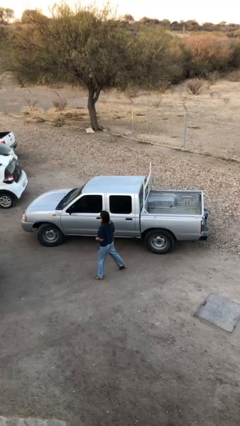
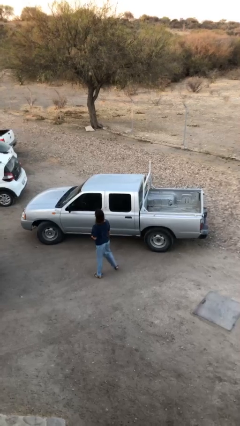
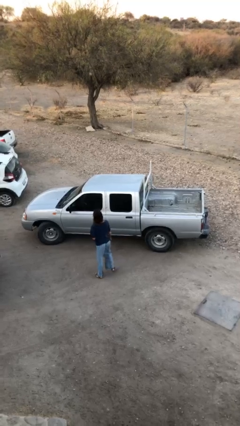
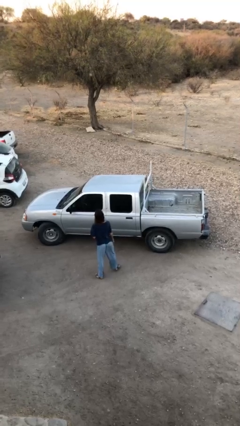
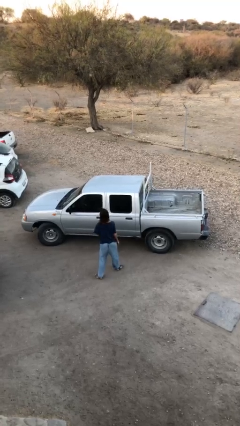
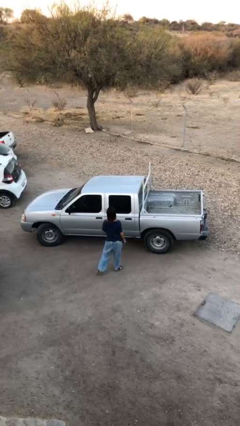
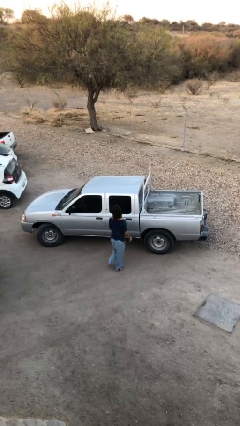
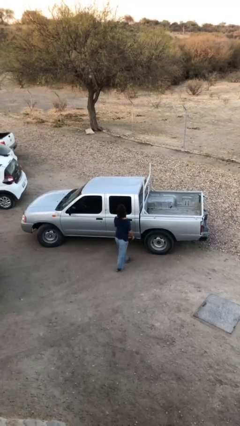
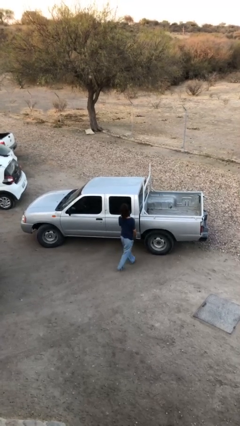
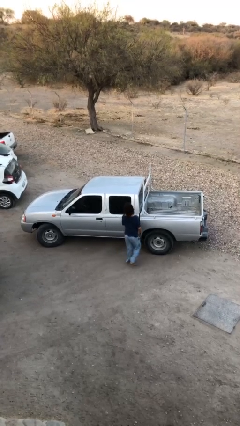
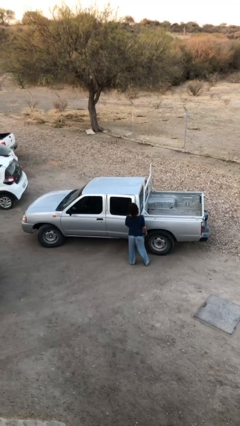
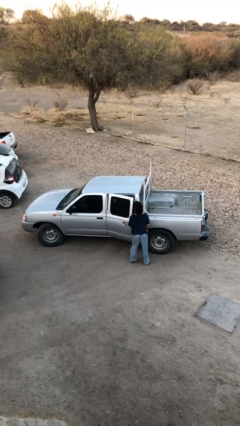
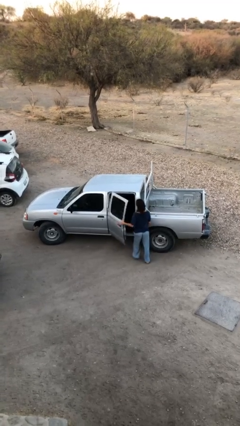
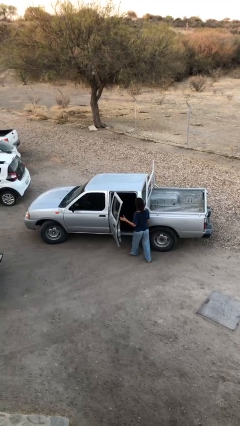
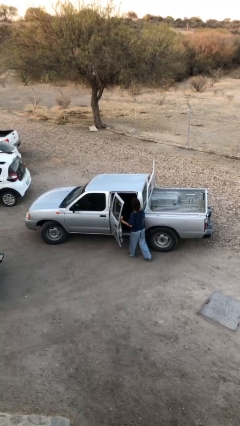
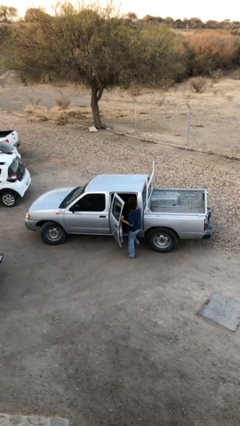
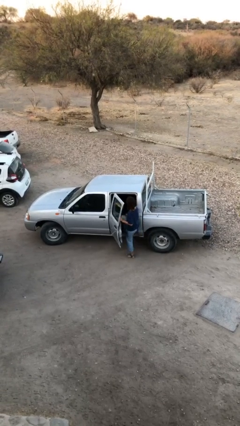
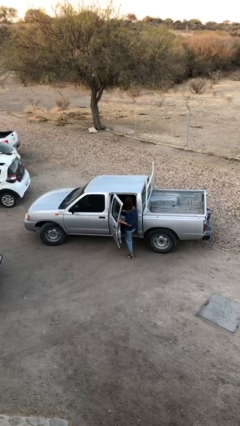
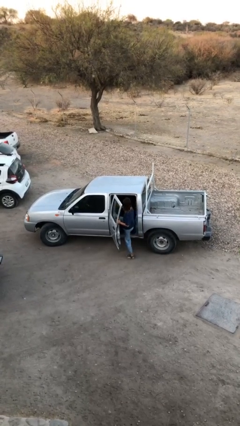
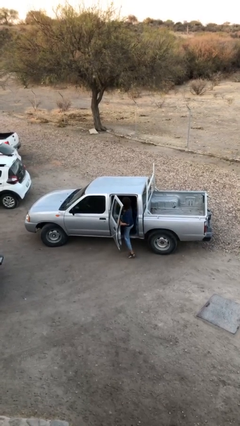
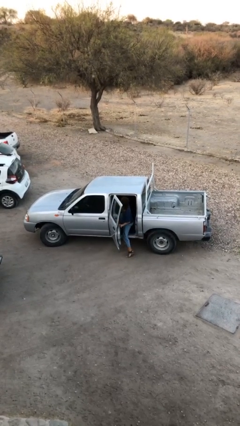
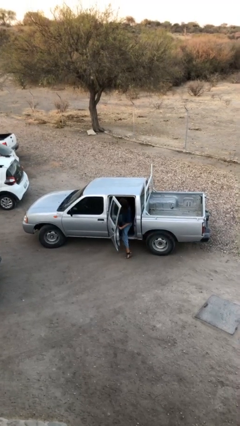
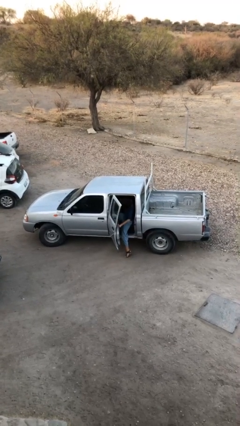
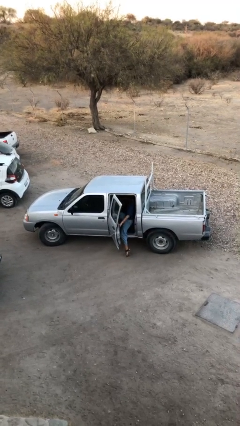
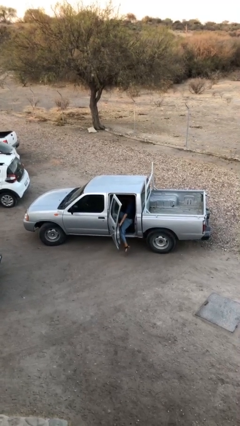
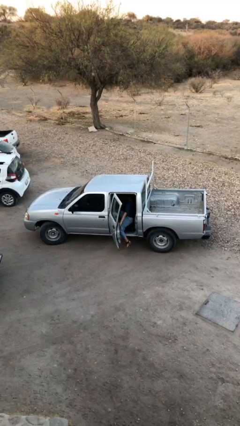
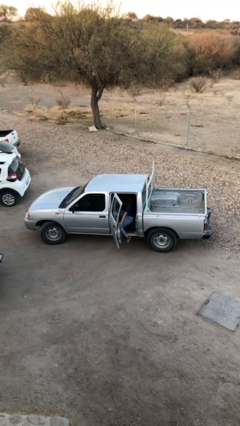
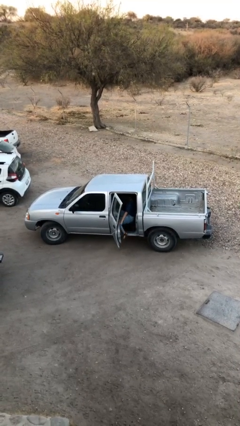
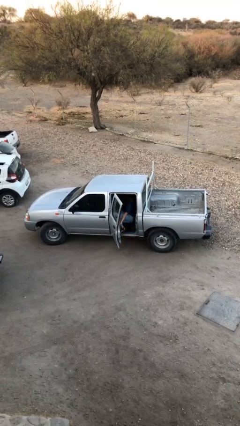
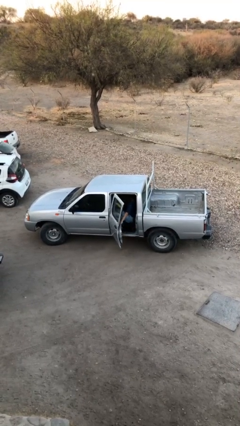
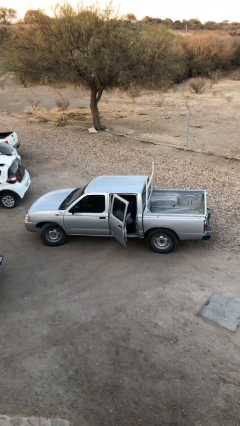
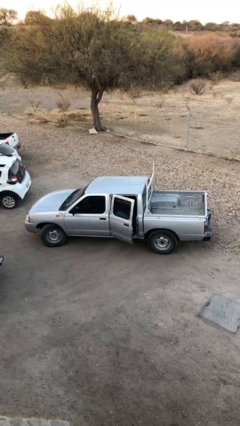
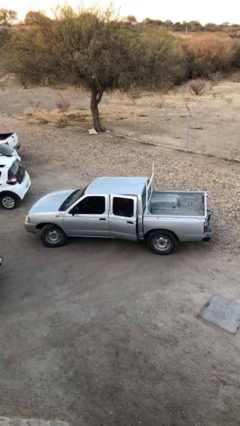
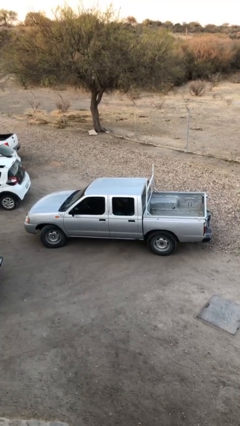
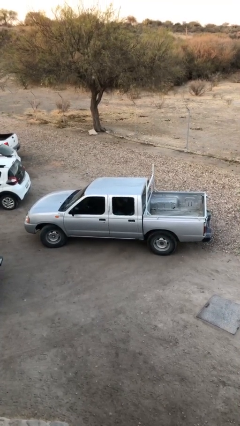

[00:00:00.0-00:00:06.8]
car picks up person

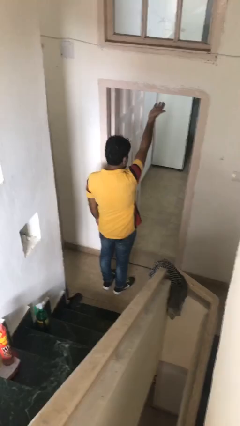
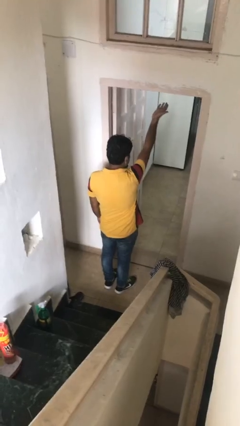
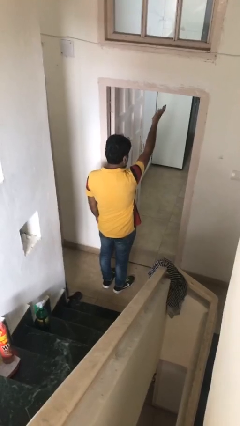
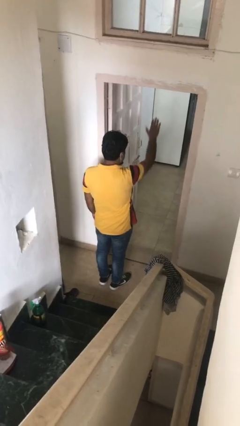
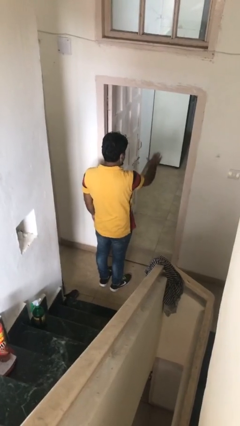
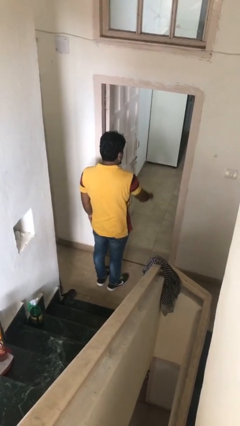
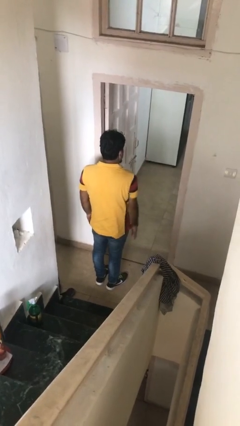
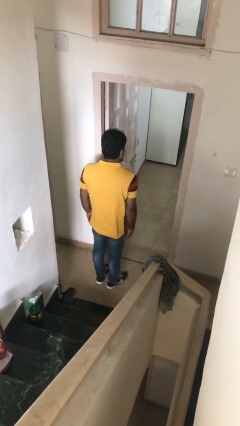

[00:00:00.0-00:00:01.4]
person gestures swipe down

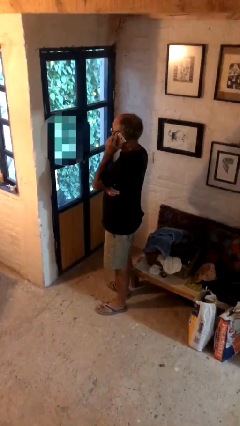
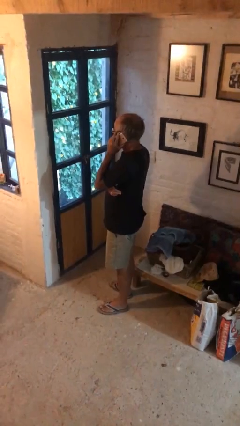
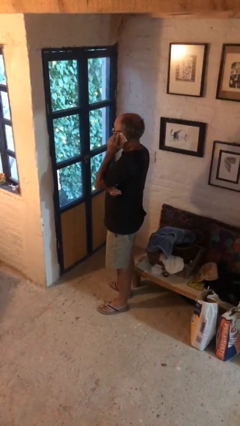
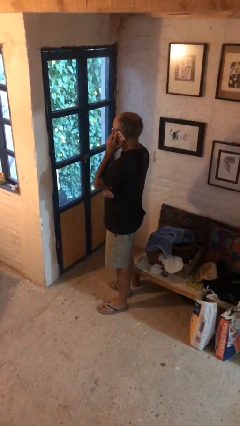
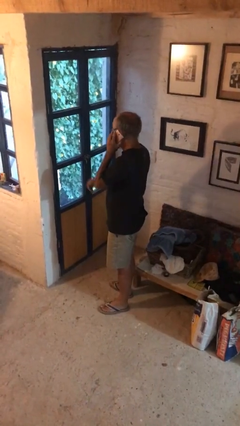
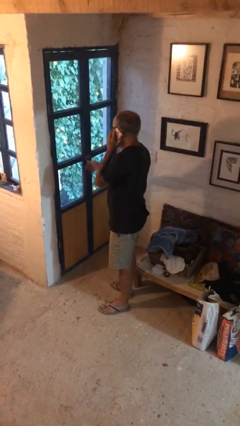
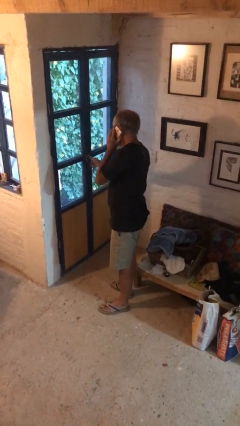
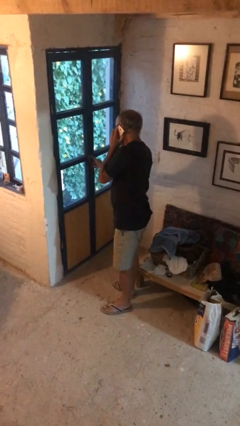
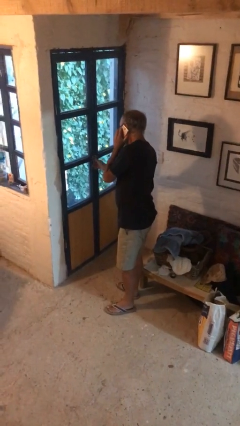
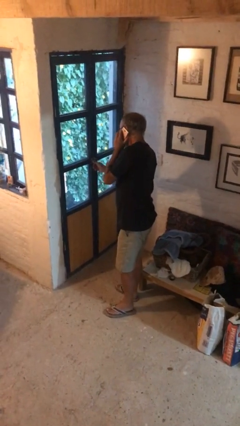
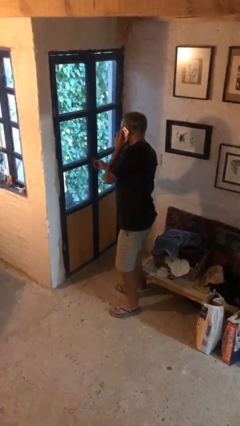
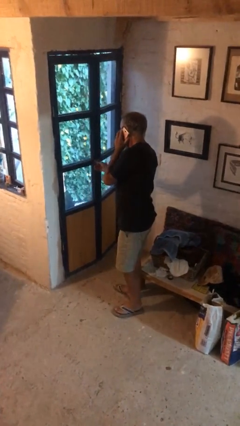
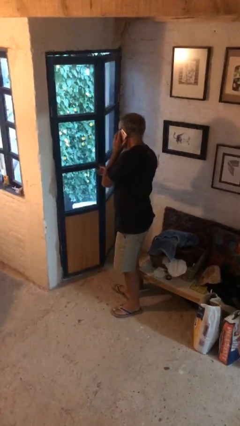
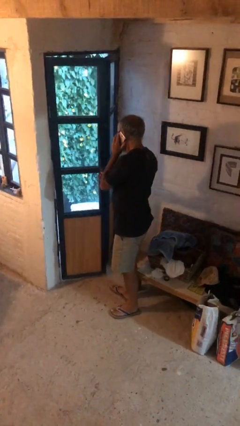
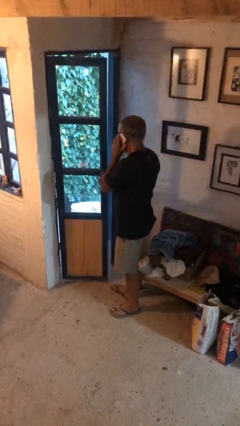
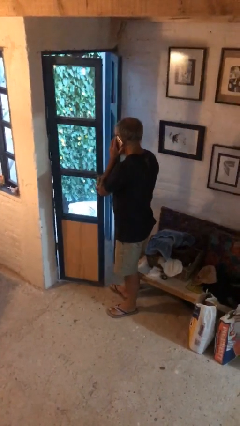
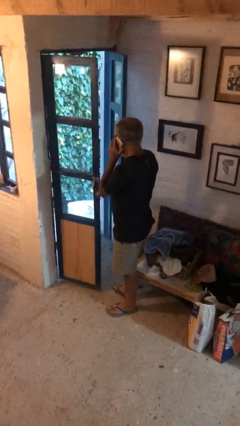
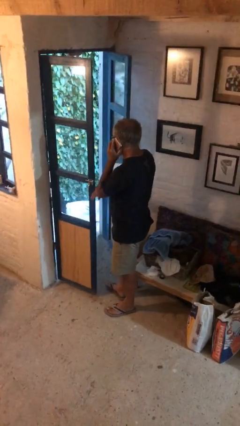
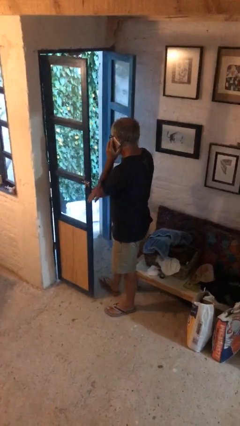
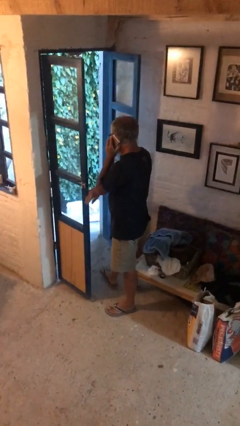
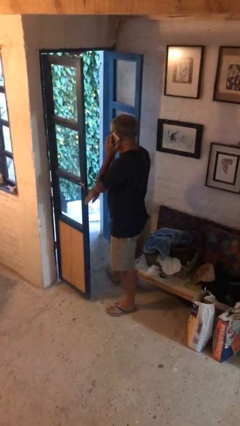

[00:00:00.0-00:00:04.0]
person opens facility door

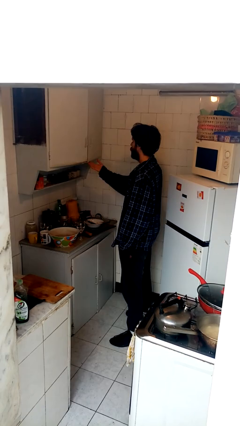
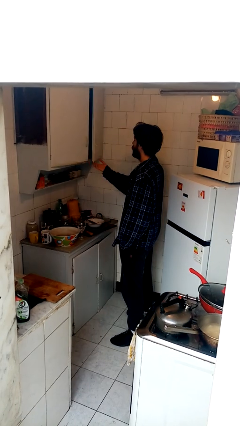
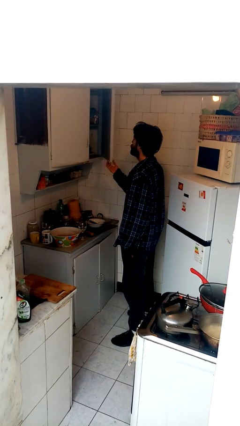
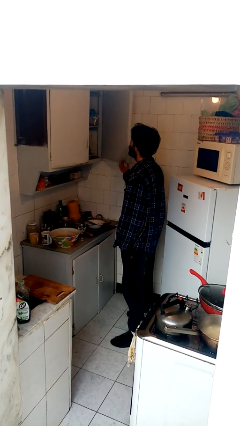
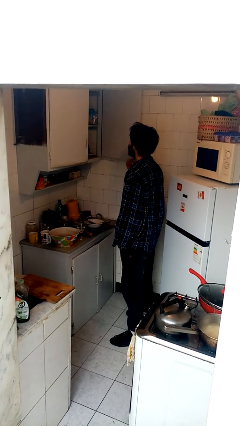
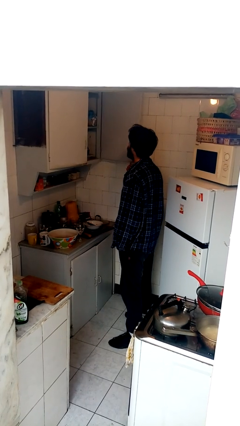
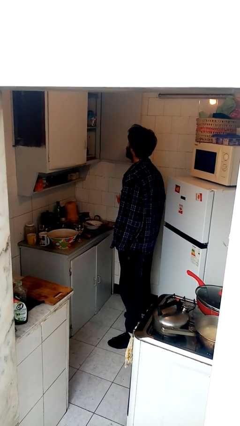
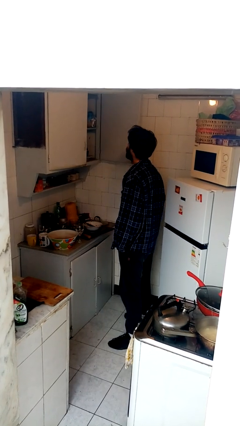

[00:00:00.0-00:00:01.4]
person opens cabinet

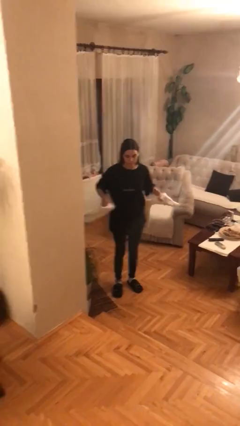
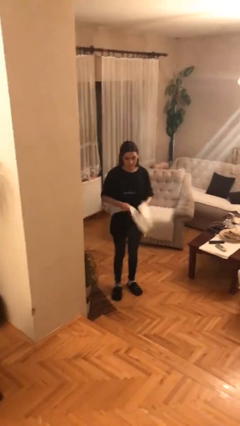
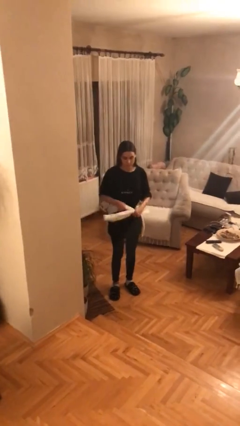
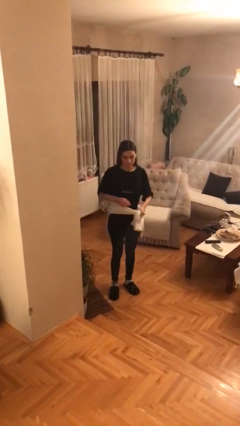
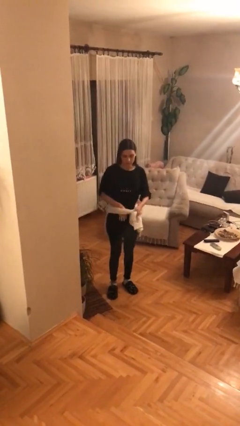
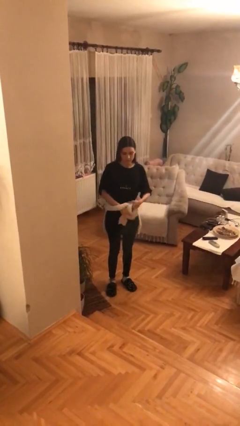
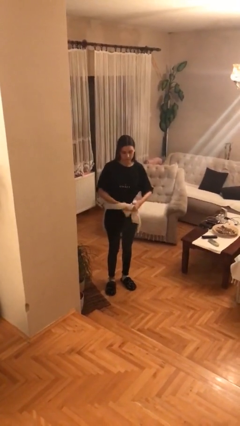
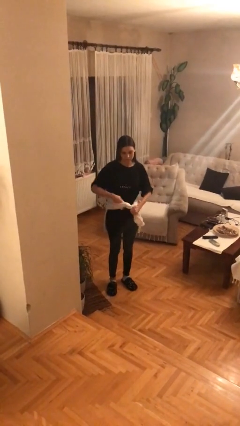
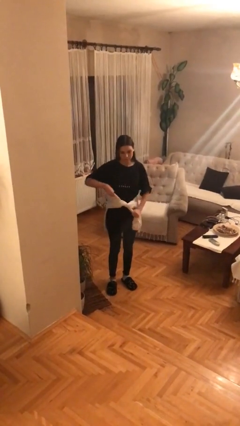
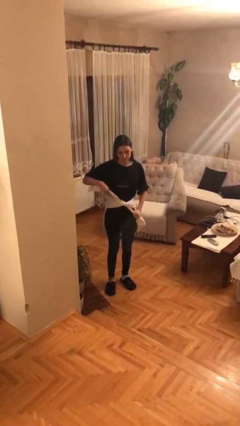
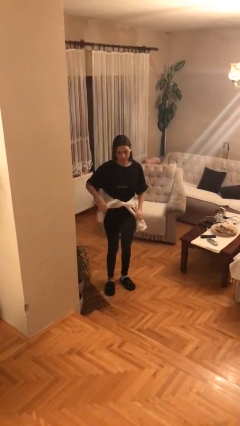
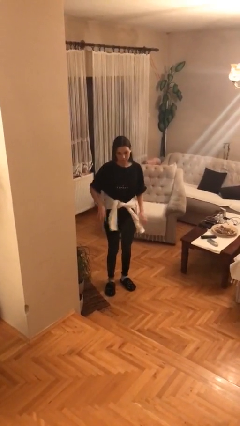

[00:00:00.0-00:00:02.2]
person ties jacket around waist

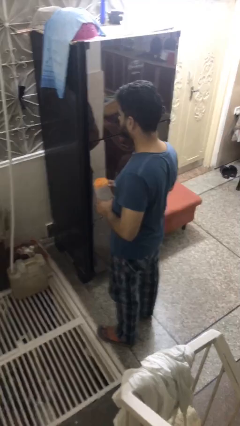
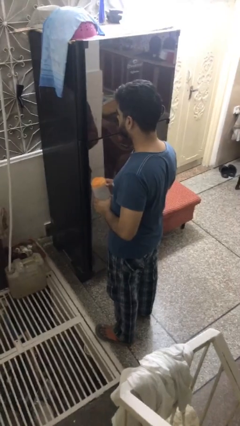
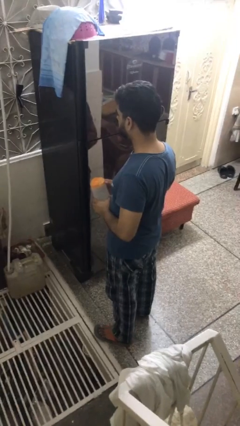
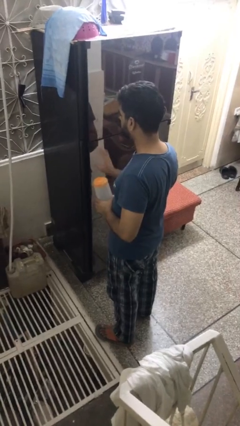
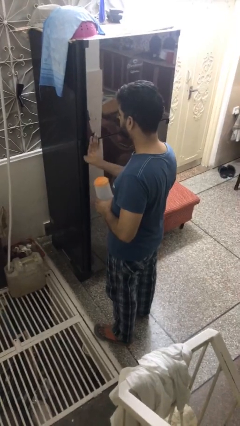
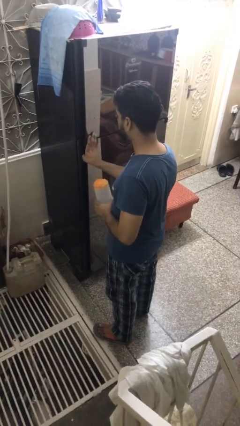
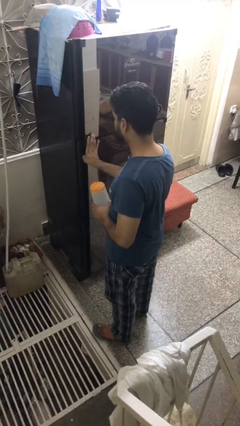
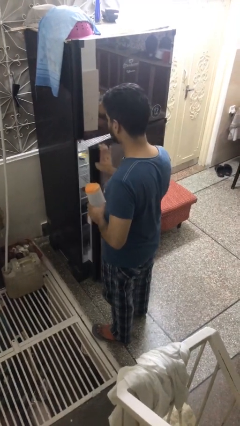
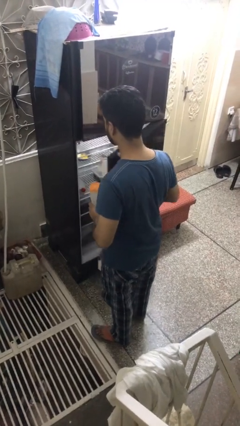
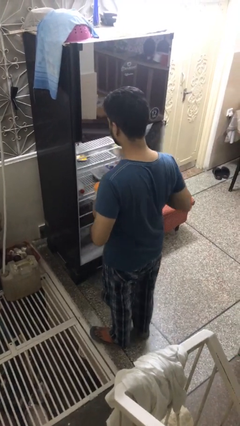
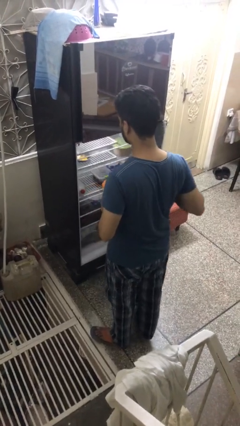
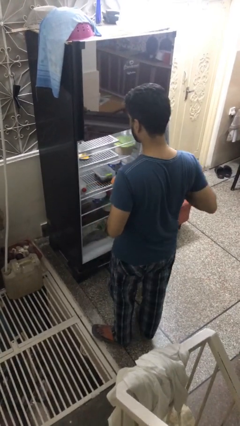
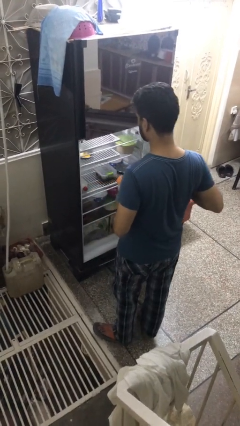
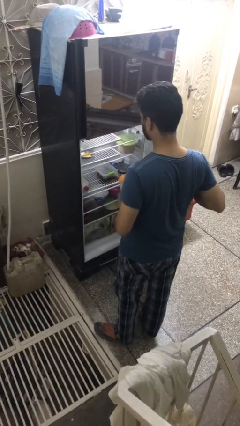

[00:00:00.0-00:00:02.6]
person opens refrigerator
